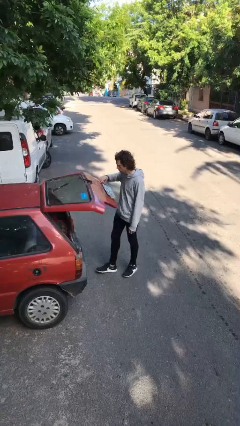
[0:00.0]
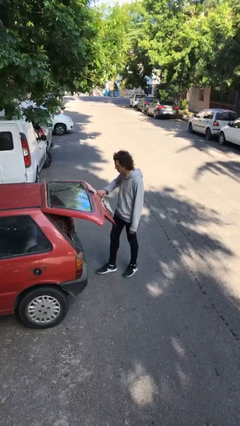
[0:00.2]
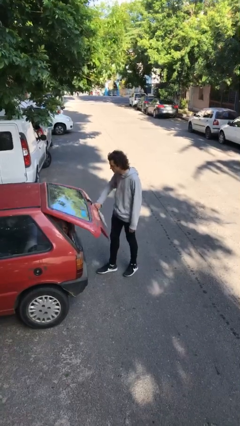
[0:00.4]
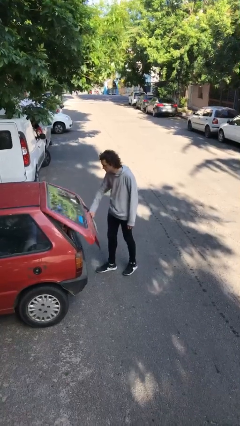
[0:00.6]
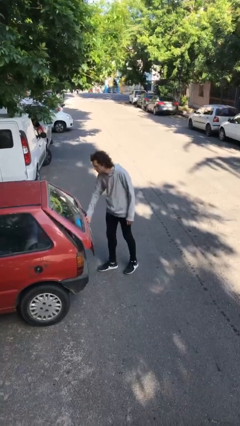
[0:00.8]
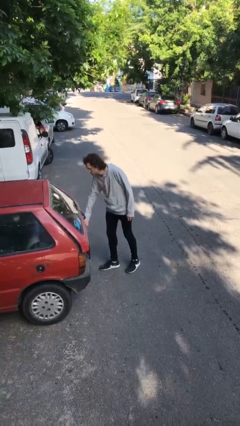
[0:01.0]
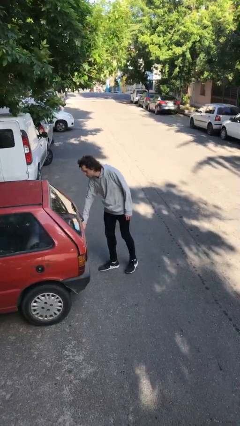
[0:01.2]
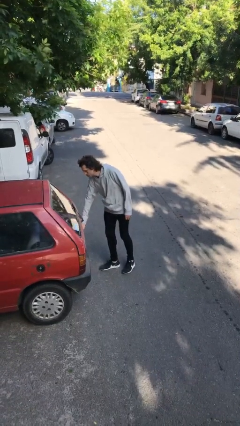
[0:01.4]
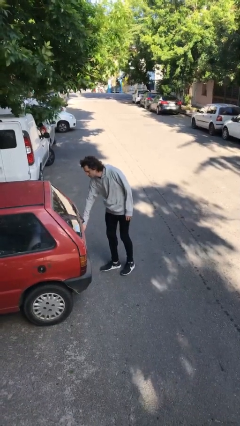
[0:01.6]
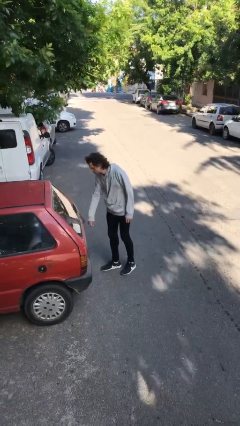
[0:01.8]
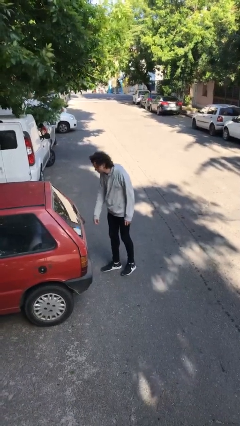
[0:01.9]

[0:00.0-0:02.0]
person closes car trunk

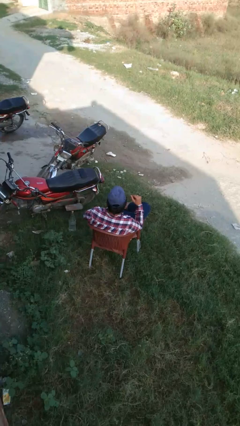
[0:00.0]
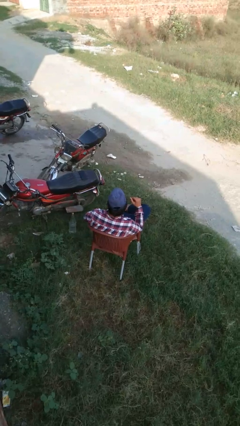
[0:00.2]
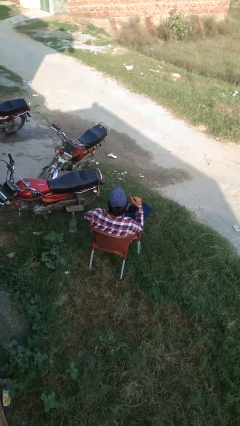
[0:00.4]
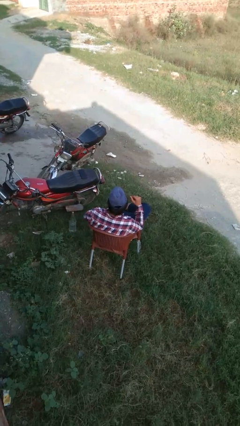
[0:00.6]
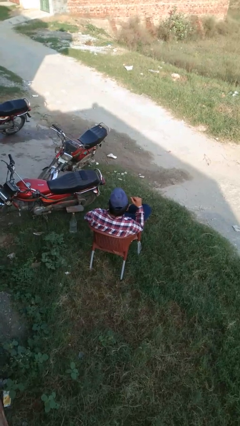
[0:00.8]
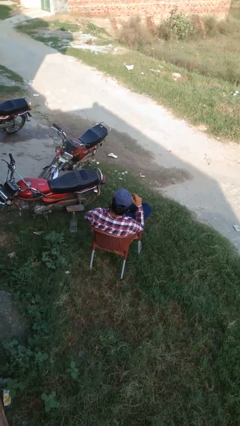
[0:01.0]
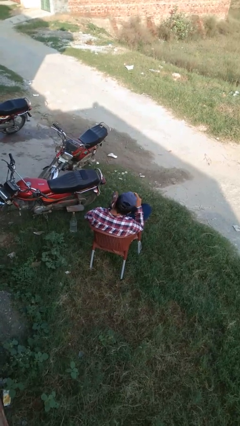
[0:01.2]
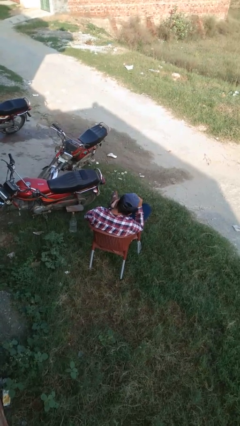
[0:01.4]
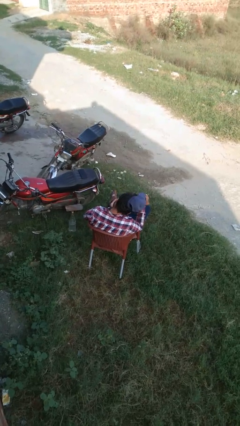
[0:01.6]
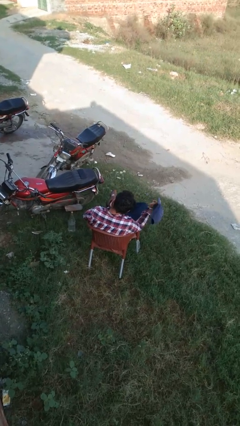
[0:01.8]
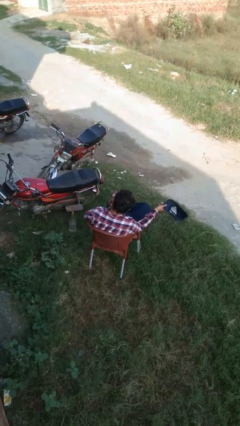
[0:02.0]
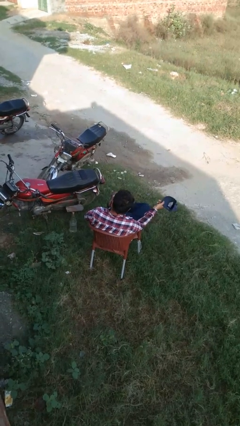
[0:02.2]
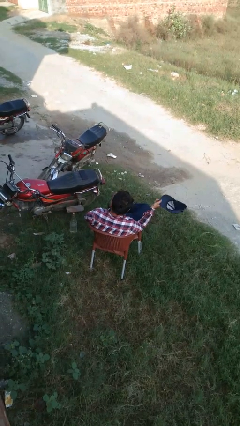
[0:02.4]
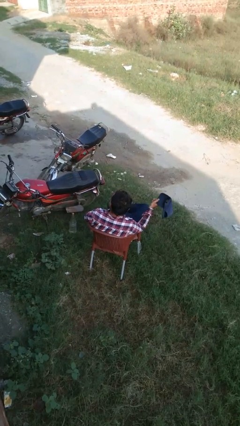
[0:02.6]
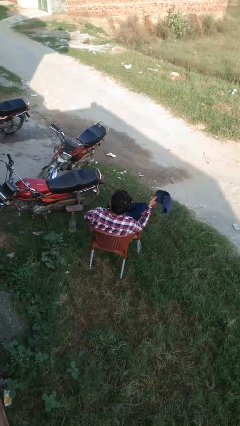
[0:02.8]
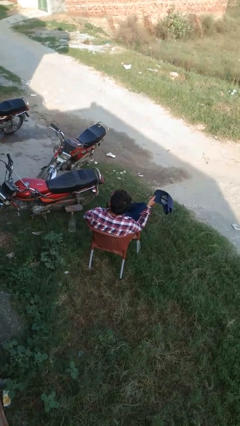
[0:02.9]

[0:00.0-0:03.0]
person takes off hat

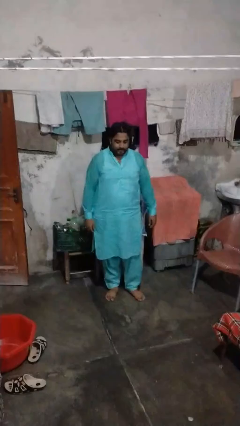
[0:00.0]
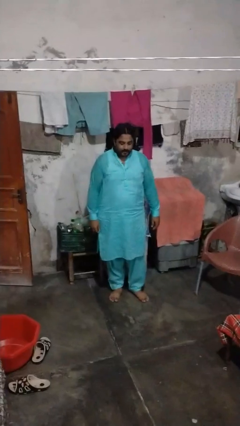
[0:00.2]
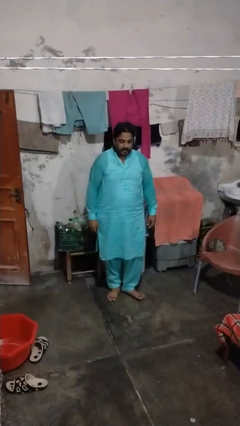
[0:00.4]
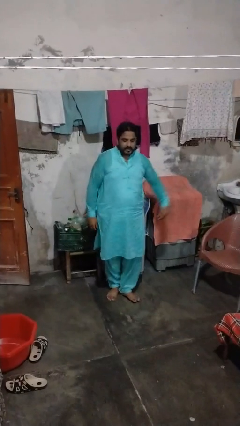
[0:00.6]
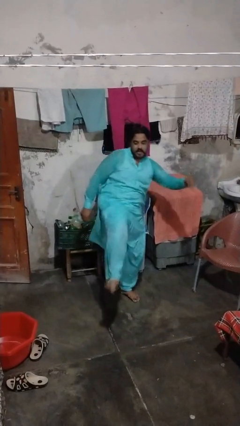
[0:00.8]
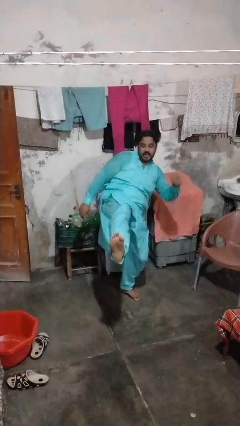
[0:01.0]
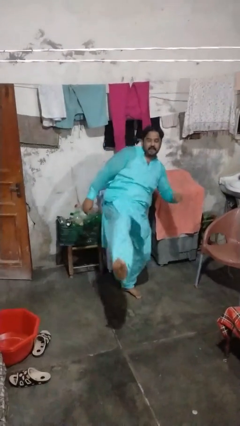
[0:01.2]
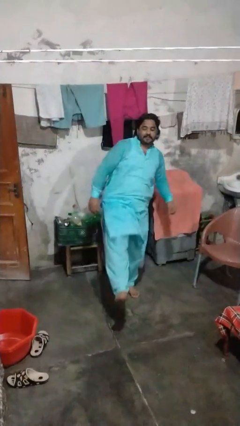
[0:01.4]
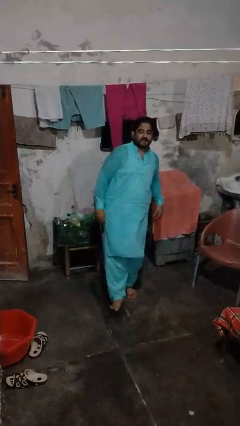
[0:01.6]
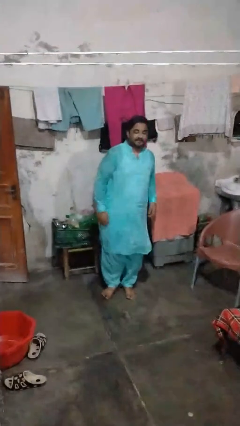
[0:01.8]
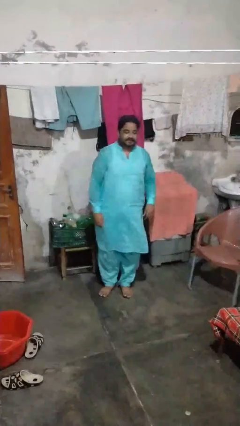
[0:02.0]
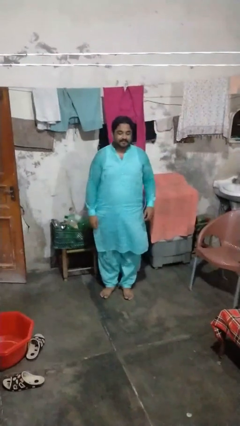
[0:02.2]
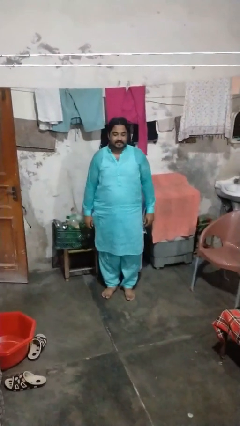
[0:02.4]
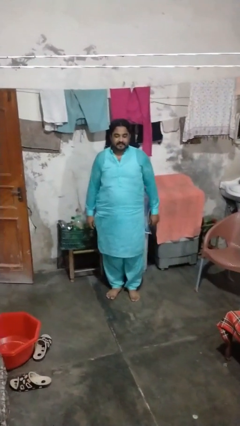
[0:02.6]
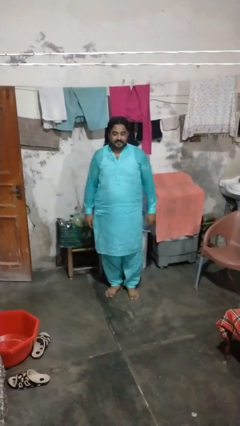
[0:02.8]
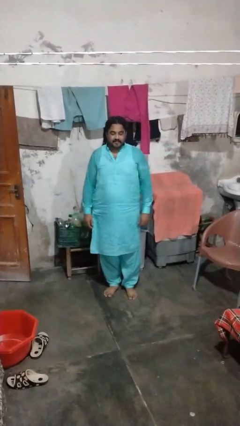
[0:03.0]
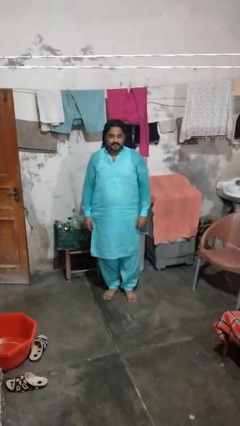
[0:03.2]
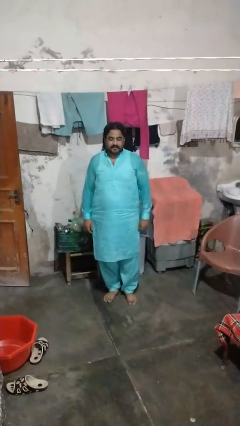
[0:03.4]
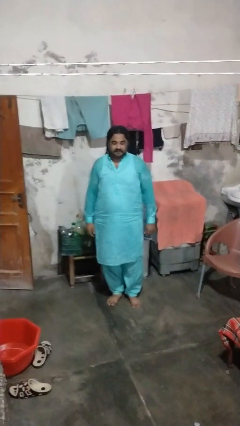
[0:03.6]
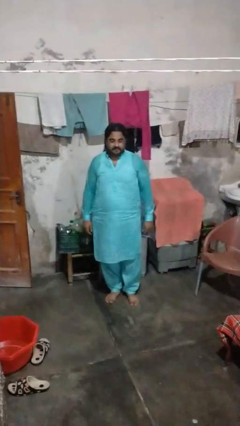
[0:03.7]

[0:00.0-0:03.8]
person karate kicks

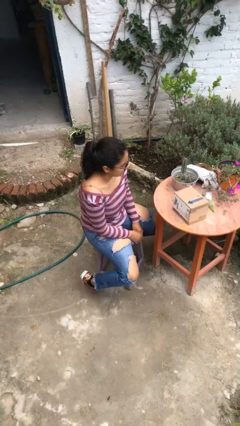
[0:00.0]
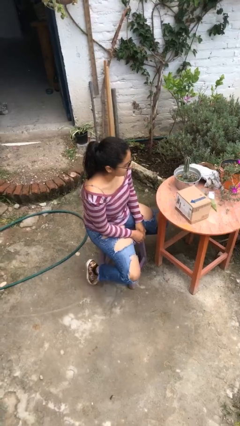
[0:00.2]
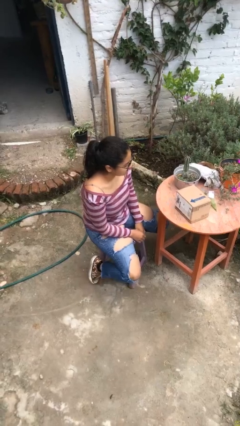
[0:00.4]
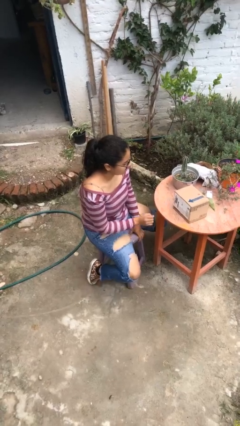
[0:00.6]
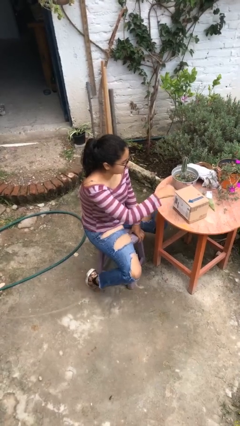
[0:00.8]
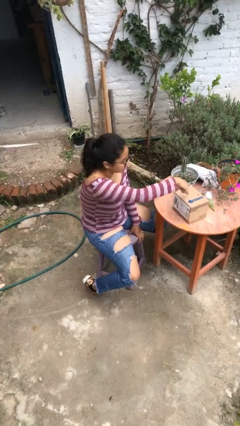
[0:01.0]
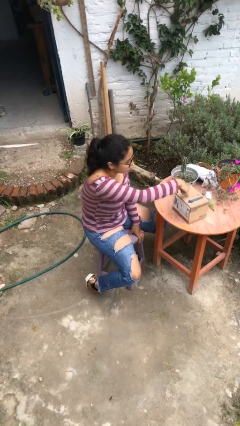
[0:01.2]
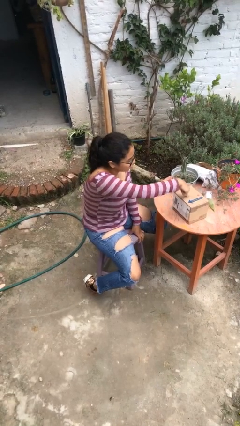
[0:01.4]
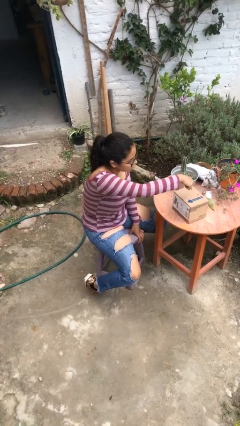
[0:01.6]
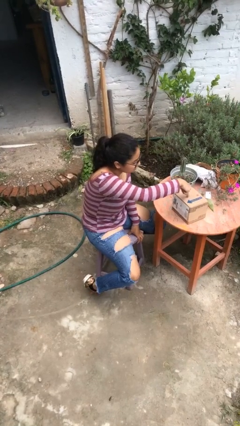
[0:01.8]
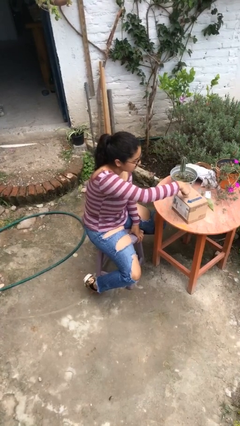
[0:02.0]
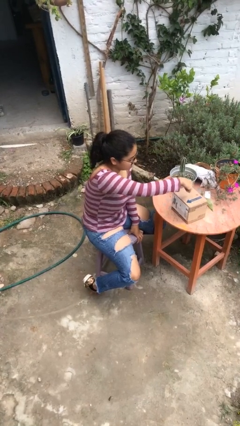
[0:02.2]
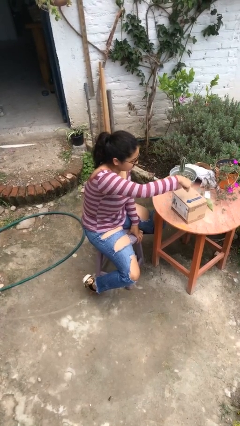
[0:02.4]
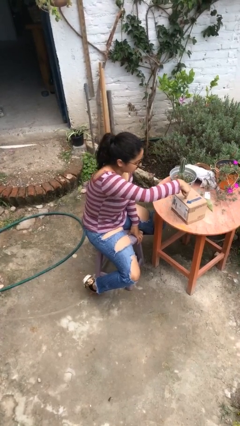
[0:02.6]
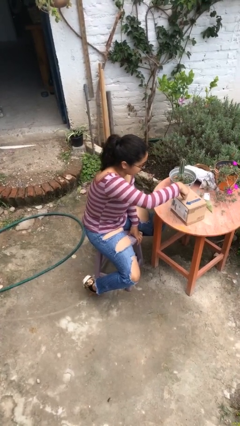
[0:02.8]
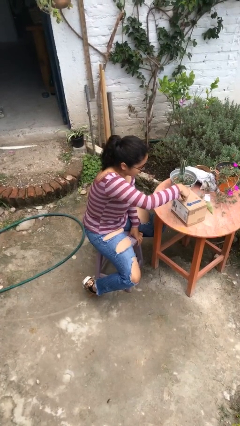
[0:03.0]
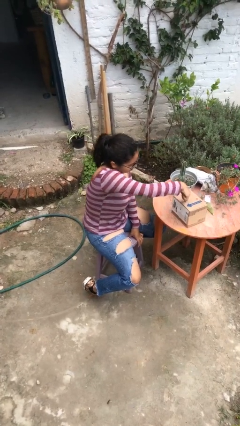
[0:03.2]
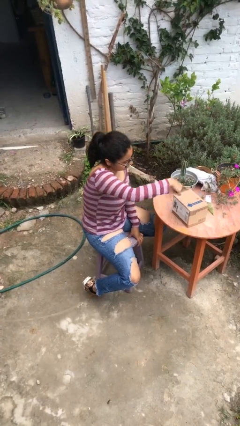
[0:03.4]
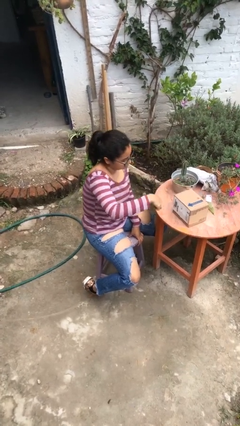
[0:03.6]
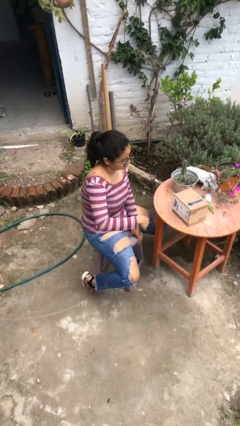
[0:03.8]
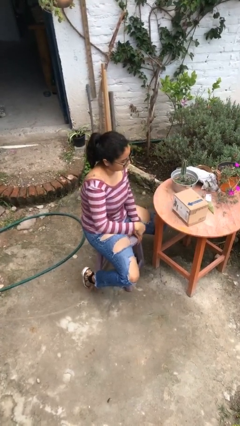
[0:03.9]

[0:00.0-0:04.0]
person taps object with finger

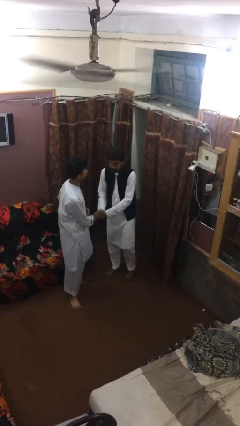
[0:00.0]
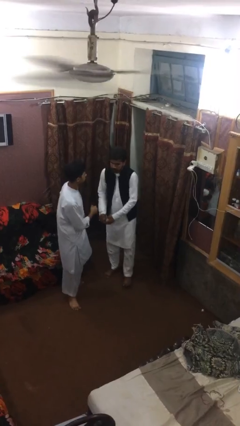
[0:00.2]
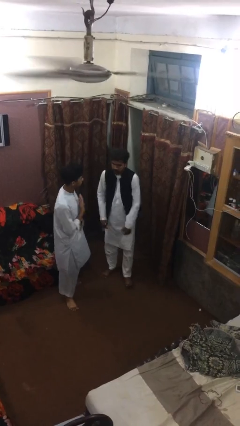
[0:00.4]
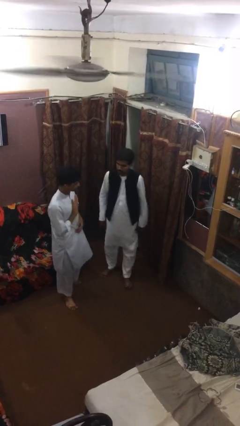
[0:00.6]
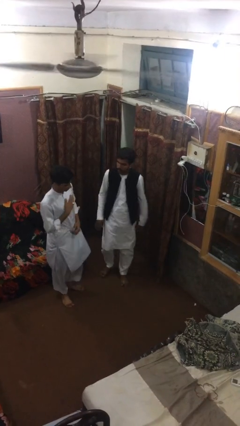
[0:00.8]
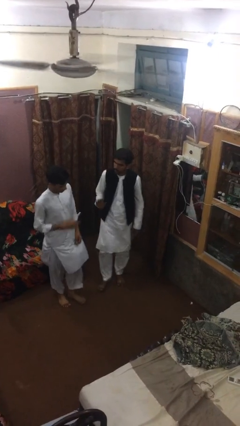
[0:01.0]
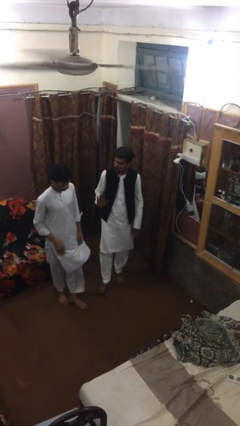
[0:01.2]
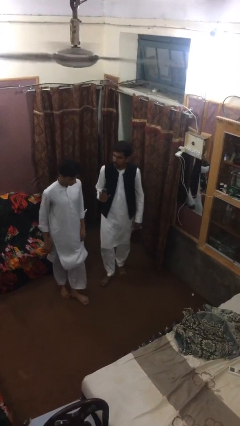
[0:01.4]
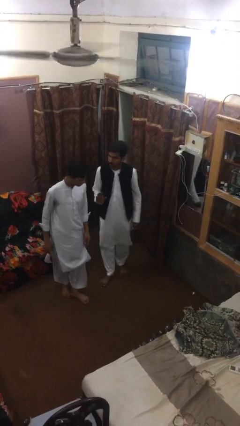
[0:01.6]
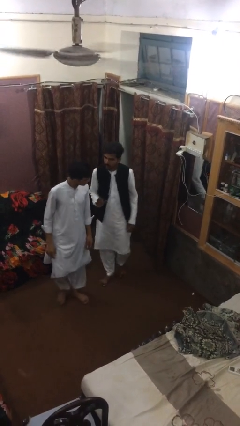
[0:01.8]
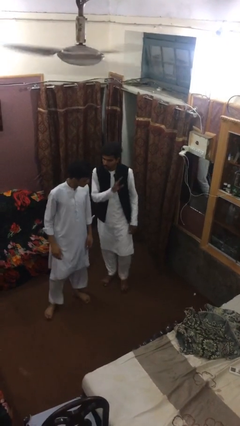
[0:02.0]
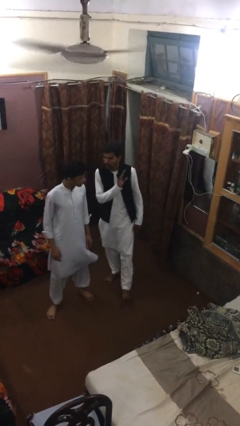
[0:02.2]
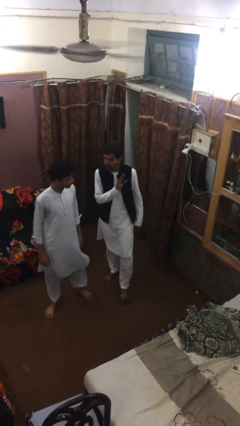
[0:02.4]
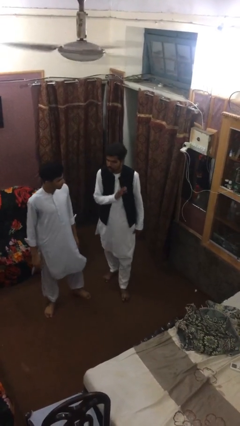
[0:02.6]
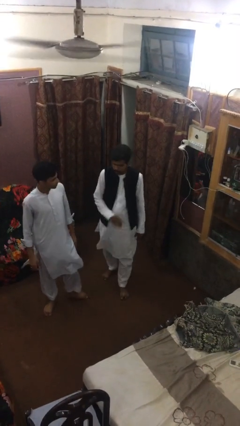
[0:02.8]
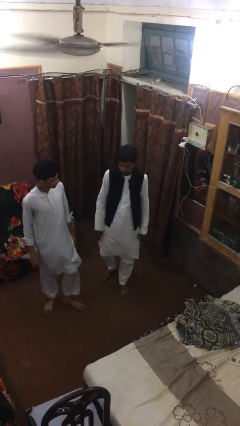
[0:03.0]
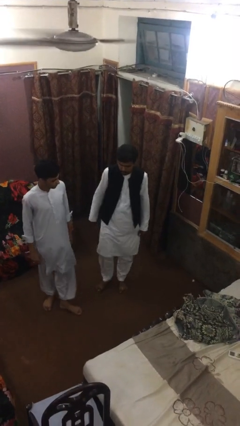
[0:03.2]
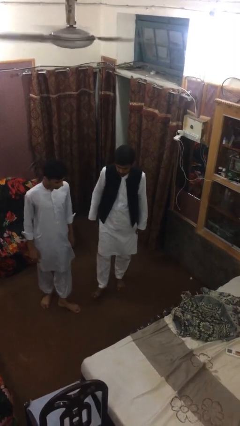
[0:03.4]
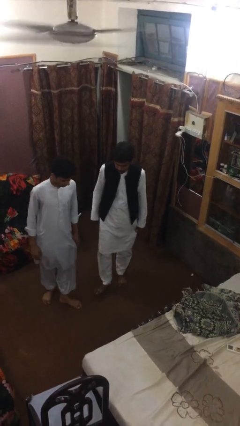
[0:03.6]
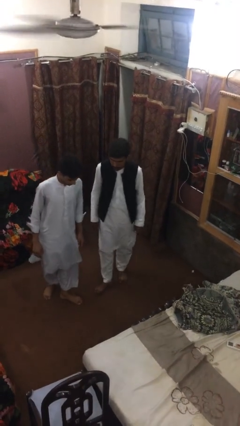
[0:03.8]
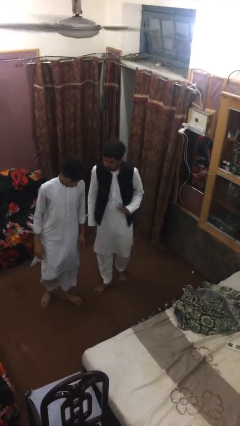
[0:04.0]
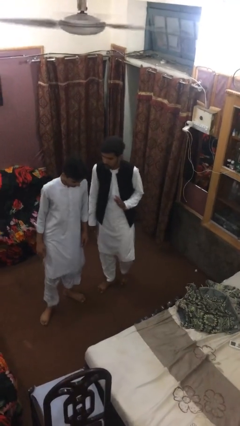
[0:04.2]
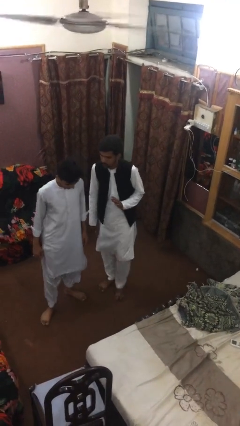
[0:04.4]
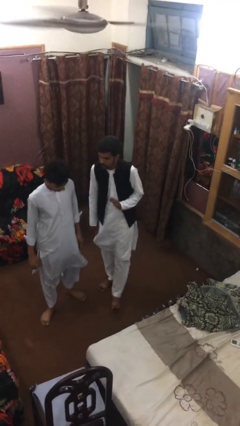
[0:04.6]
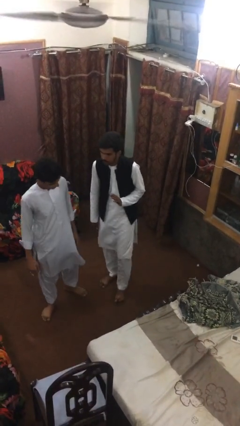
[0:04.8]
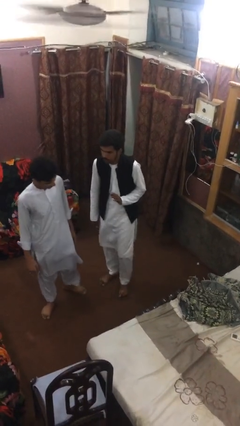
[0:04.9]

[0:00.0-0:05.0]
person talks to person
